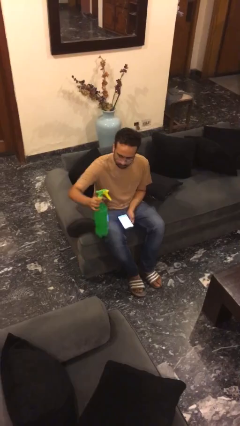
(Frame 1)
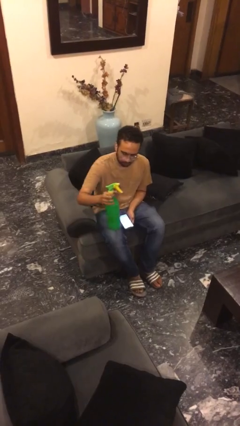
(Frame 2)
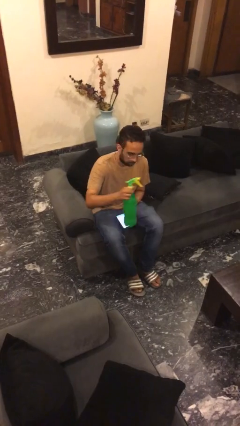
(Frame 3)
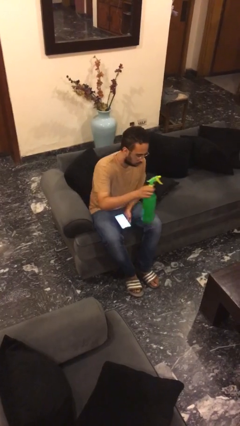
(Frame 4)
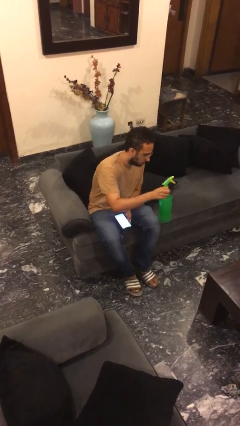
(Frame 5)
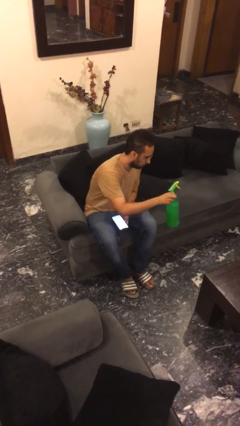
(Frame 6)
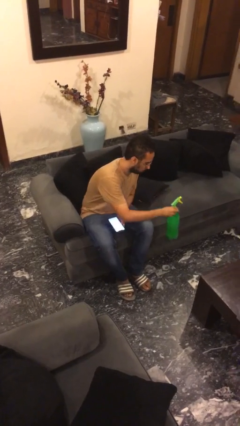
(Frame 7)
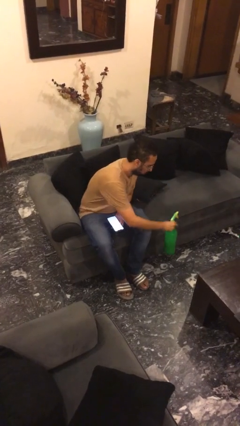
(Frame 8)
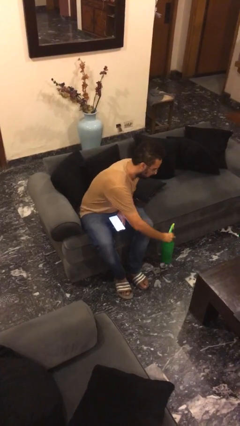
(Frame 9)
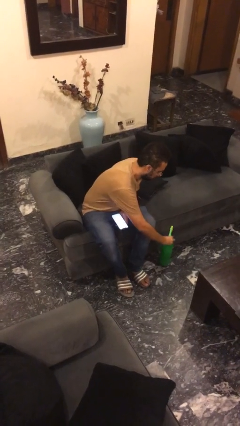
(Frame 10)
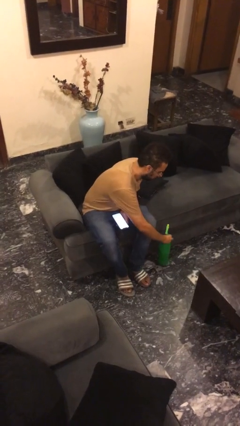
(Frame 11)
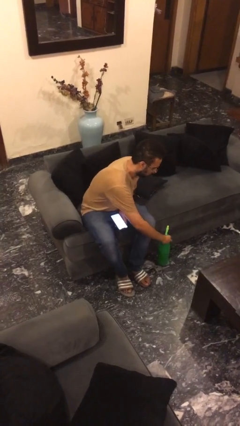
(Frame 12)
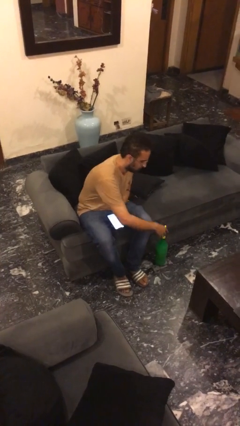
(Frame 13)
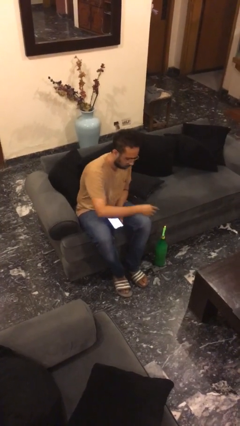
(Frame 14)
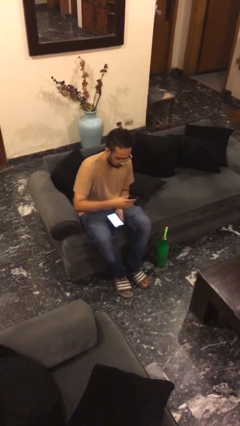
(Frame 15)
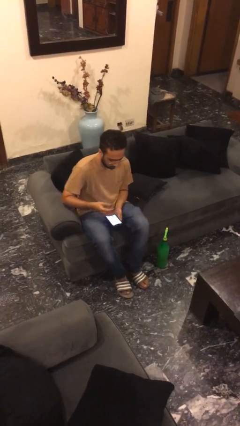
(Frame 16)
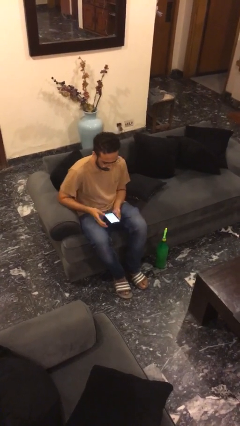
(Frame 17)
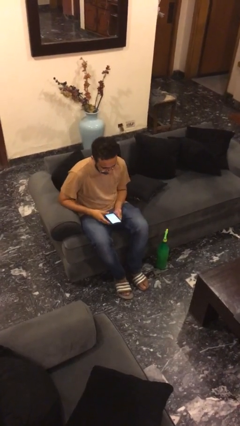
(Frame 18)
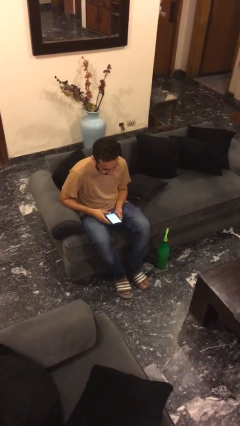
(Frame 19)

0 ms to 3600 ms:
person puts down object on floor

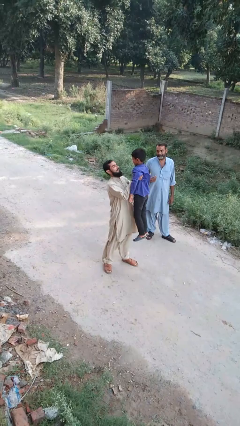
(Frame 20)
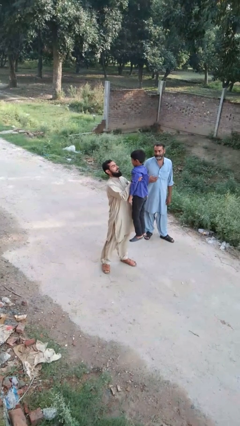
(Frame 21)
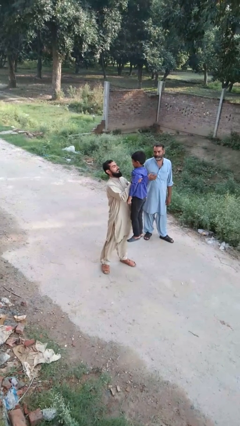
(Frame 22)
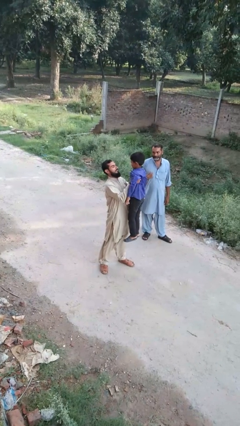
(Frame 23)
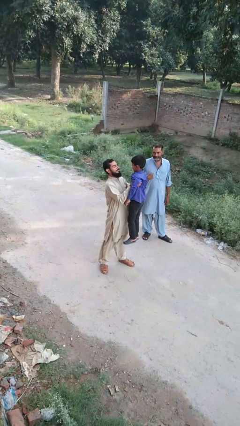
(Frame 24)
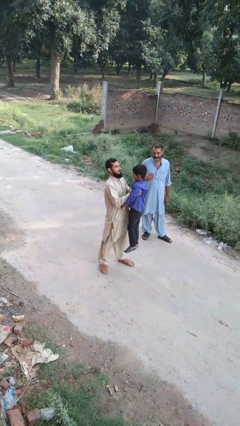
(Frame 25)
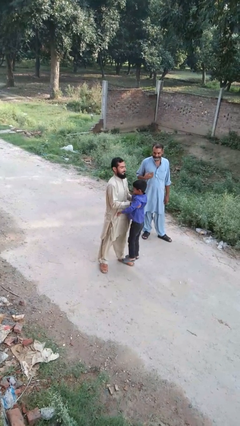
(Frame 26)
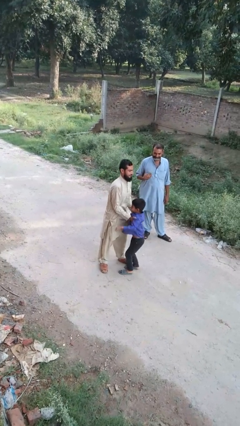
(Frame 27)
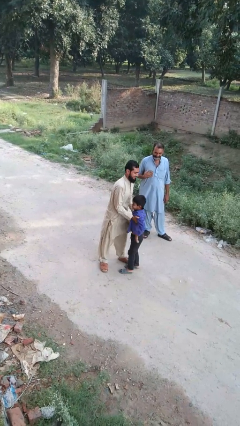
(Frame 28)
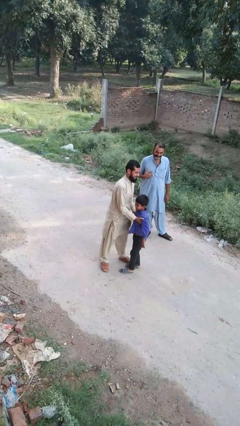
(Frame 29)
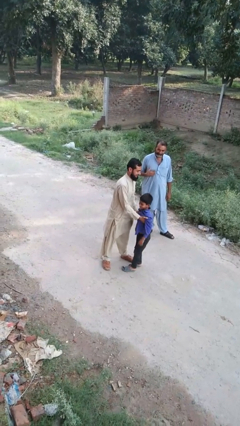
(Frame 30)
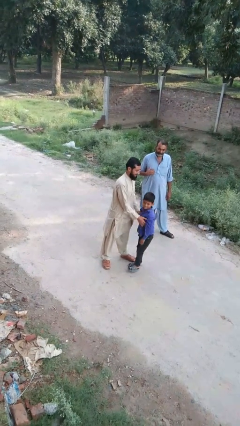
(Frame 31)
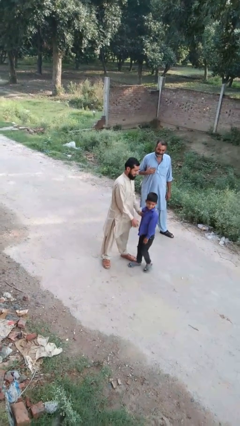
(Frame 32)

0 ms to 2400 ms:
person puts down person

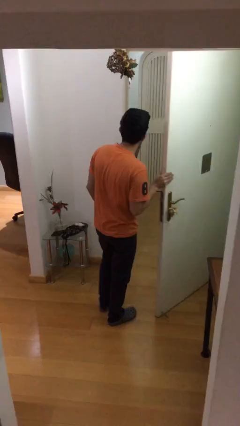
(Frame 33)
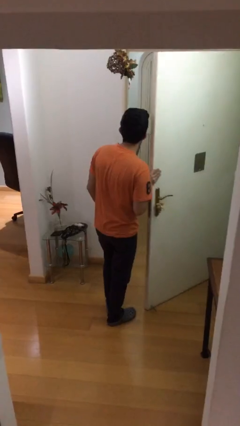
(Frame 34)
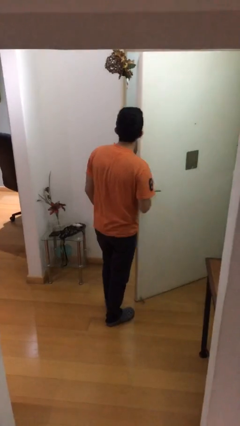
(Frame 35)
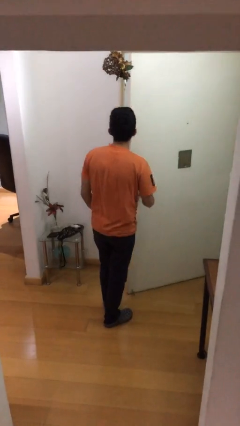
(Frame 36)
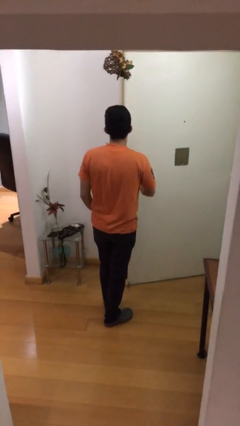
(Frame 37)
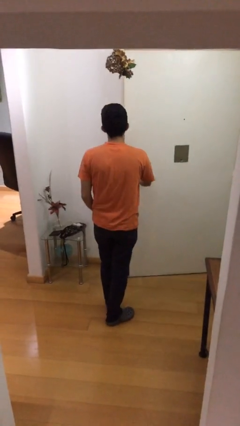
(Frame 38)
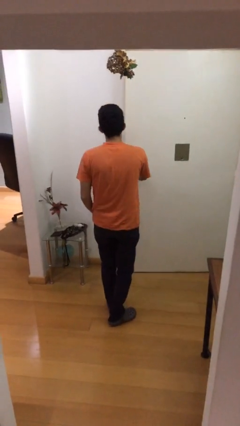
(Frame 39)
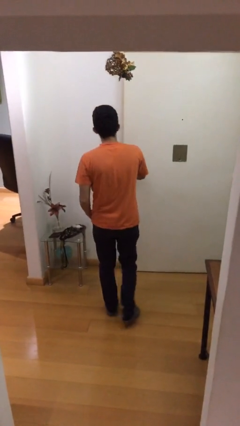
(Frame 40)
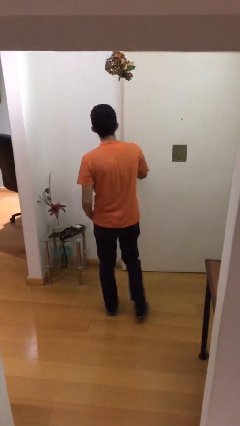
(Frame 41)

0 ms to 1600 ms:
person closes facility door

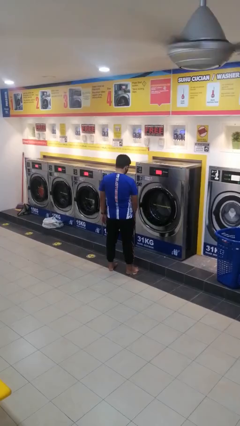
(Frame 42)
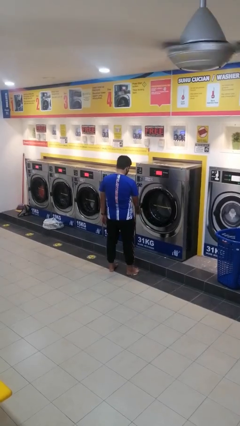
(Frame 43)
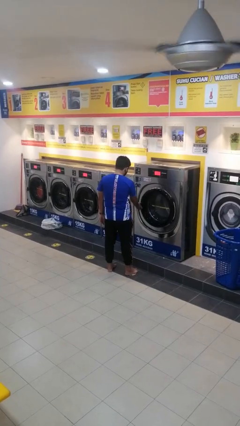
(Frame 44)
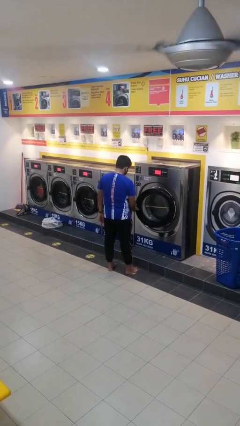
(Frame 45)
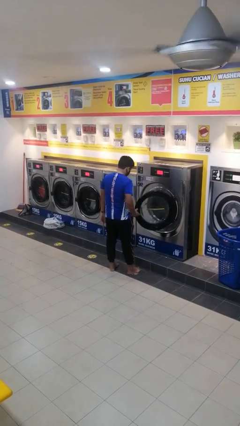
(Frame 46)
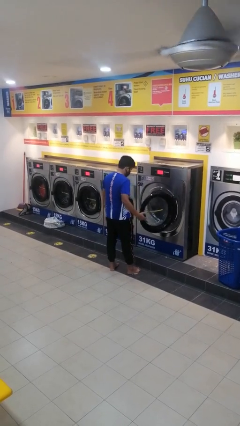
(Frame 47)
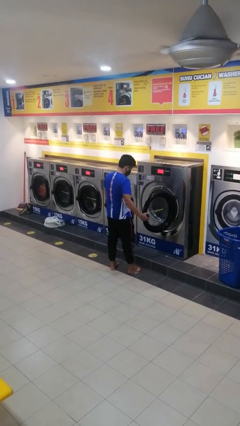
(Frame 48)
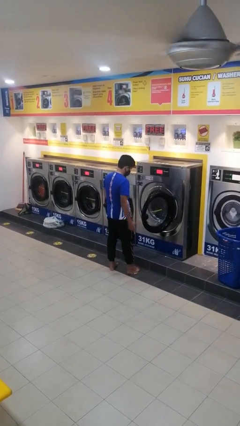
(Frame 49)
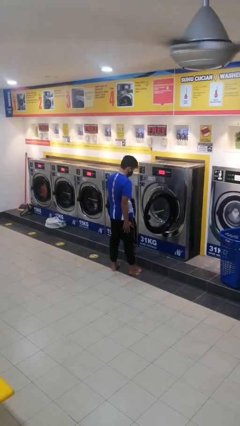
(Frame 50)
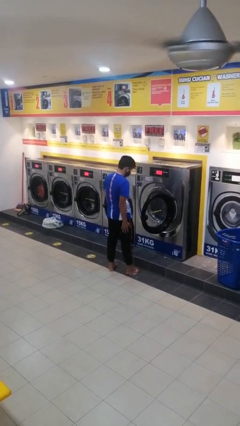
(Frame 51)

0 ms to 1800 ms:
person opens clothes washer

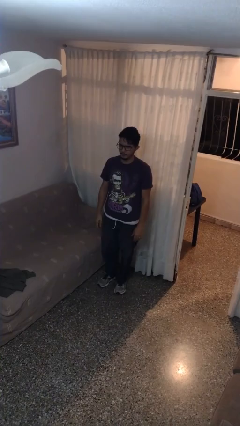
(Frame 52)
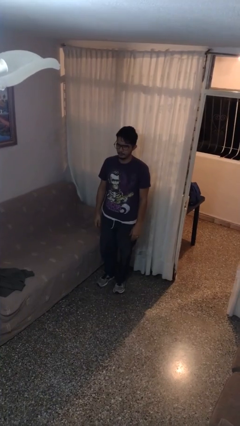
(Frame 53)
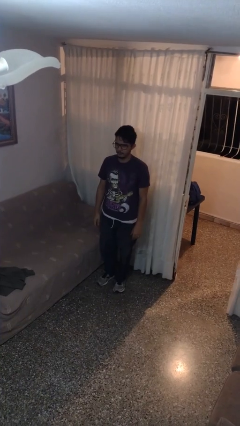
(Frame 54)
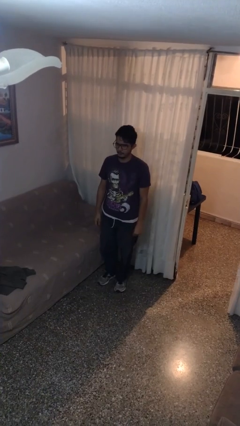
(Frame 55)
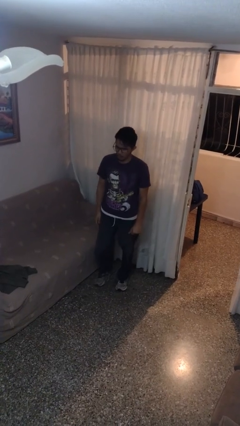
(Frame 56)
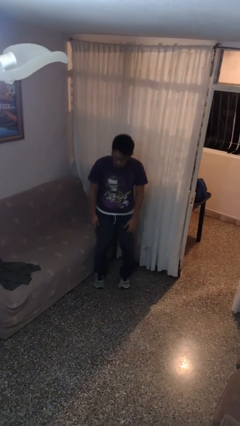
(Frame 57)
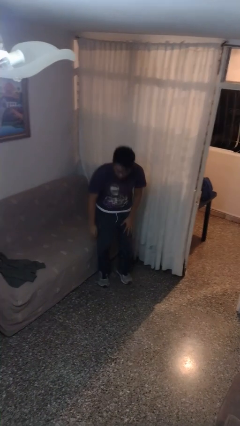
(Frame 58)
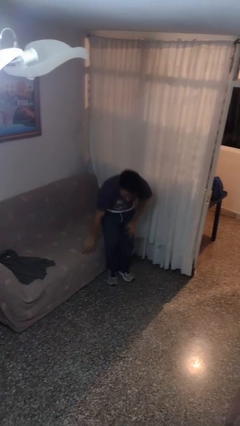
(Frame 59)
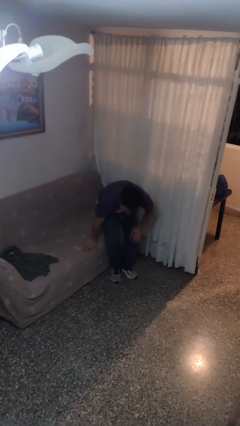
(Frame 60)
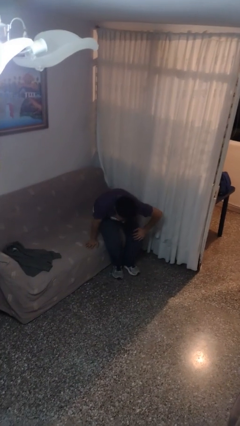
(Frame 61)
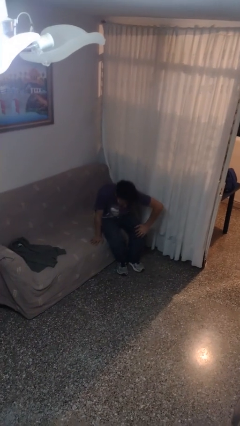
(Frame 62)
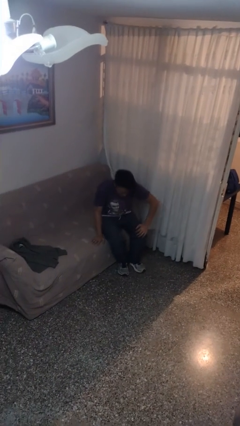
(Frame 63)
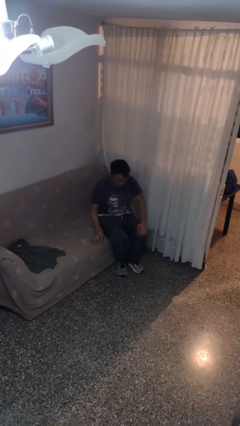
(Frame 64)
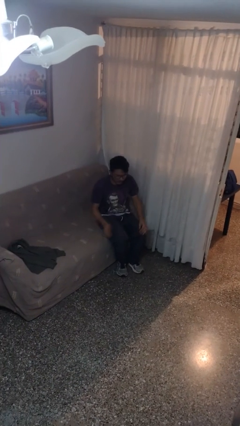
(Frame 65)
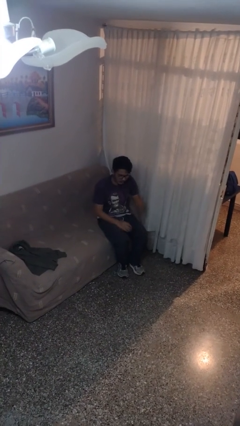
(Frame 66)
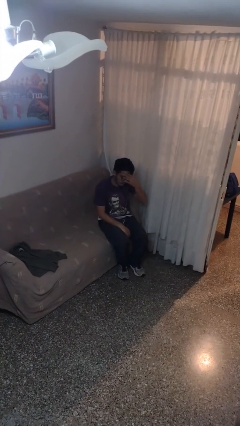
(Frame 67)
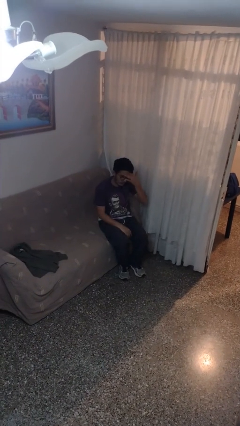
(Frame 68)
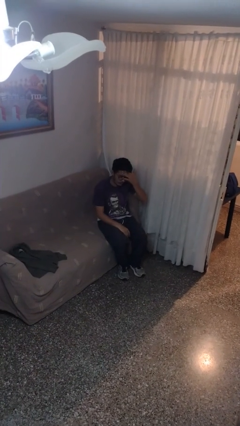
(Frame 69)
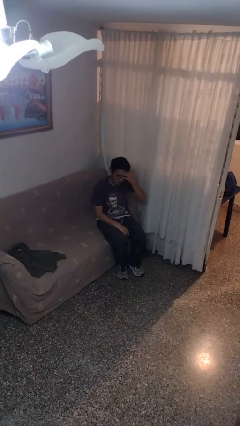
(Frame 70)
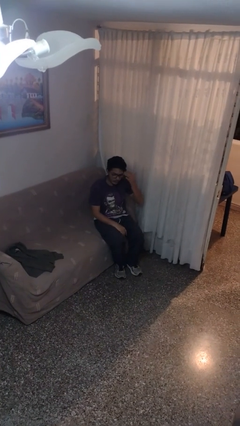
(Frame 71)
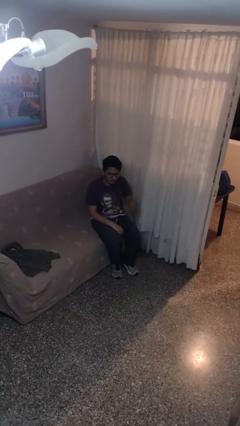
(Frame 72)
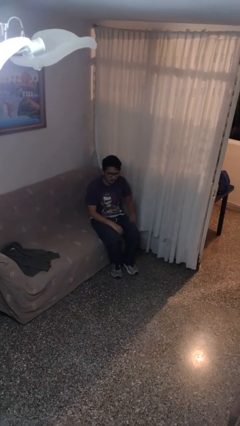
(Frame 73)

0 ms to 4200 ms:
person sits down

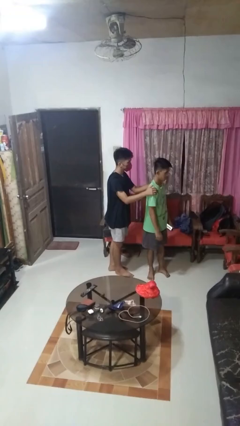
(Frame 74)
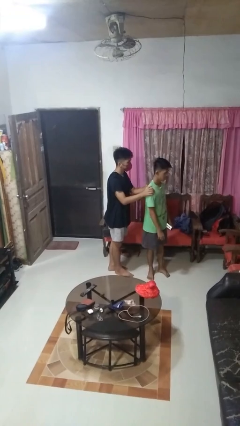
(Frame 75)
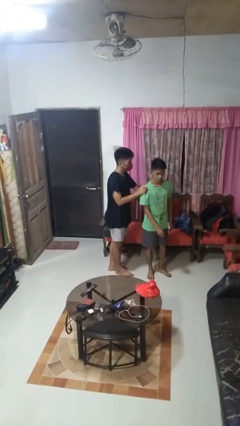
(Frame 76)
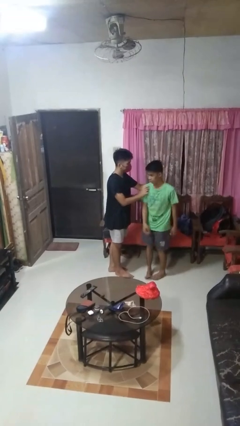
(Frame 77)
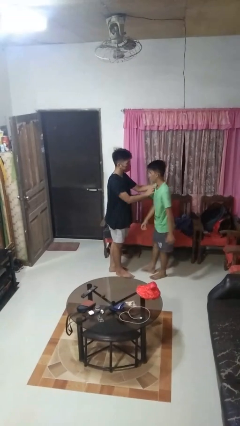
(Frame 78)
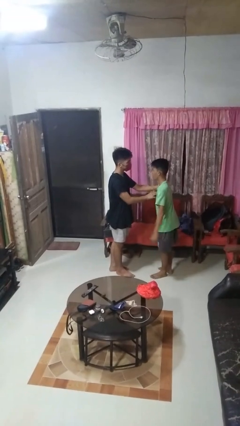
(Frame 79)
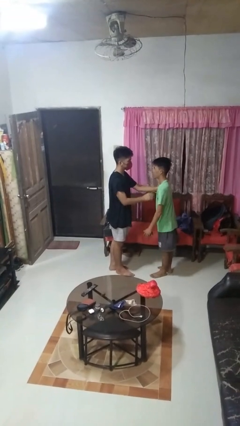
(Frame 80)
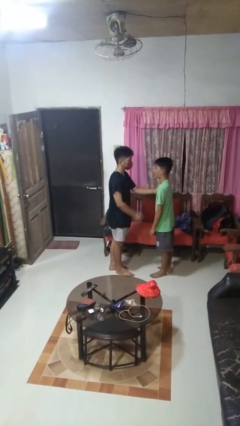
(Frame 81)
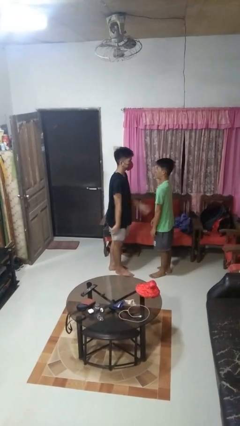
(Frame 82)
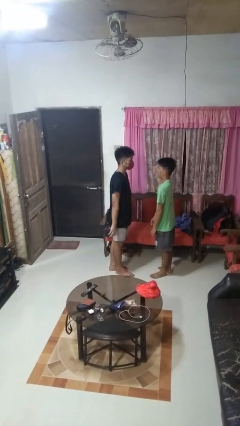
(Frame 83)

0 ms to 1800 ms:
person spins person around

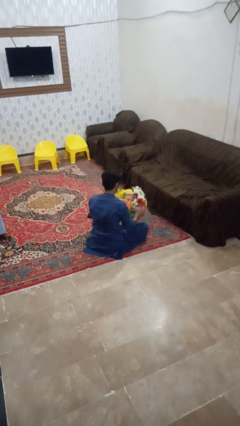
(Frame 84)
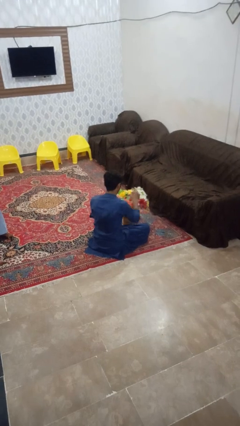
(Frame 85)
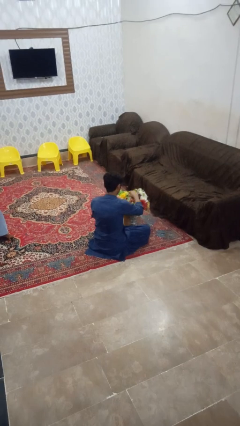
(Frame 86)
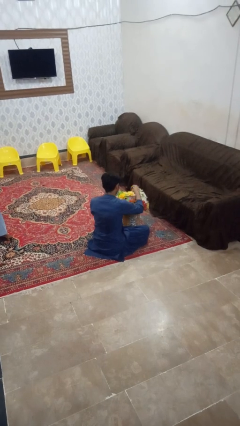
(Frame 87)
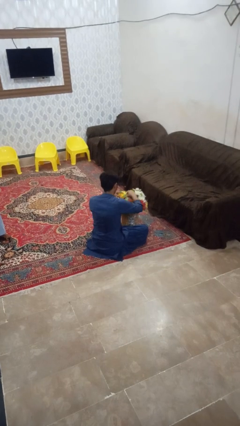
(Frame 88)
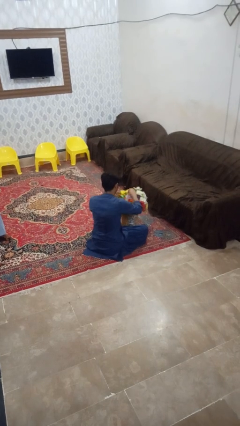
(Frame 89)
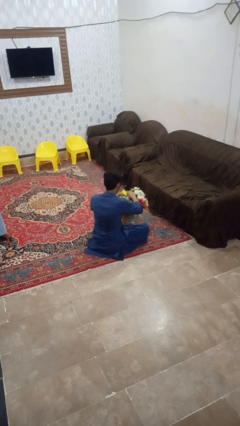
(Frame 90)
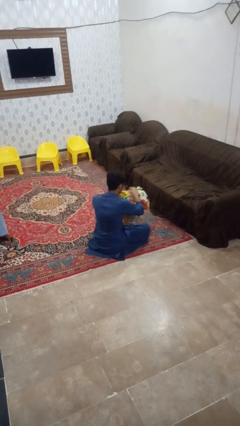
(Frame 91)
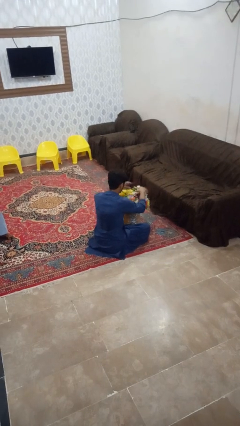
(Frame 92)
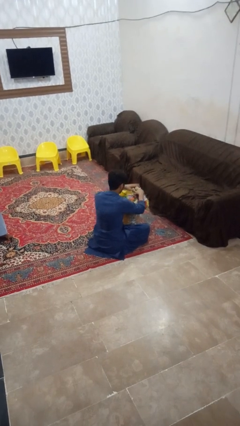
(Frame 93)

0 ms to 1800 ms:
person arranges flowers in vase

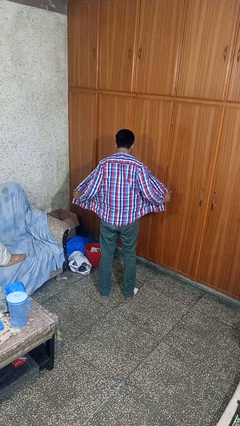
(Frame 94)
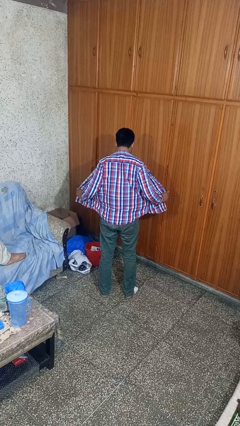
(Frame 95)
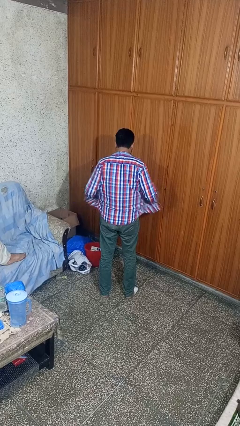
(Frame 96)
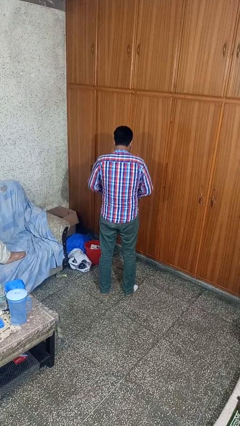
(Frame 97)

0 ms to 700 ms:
person buttons shirt
